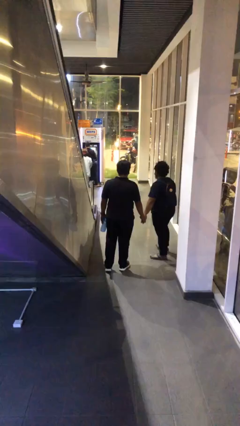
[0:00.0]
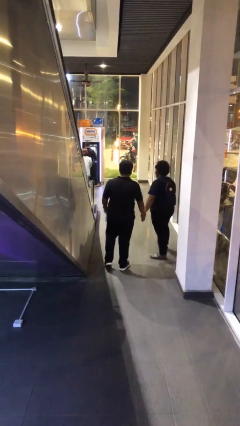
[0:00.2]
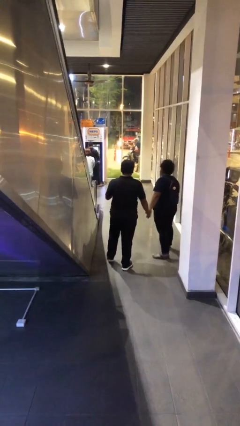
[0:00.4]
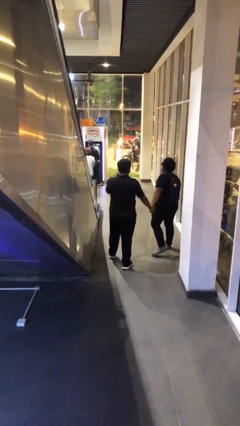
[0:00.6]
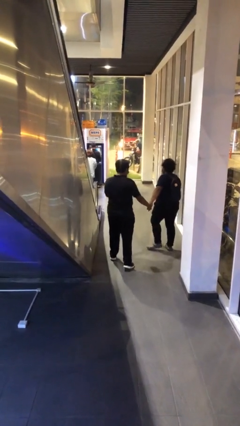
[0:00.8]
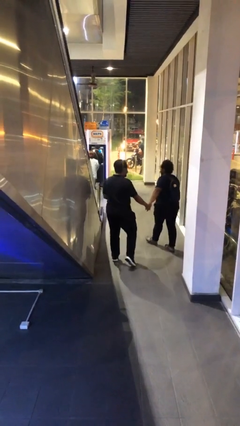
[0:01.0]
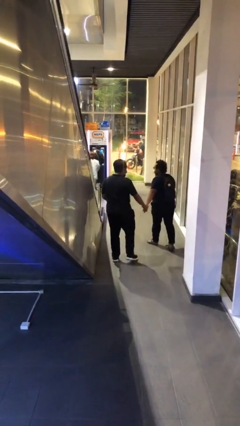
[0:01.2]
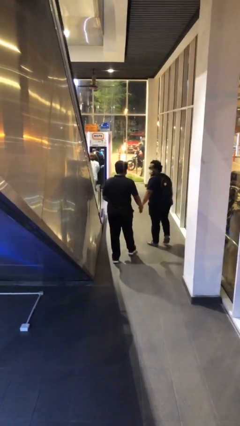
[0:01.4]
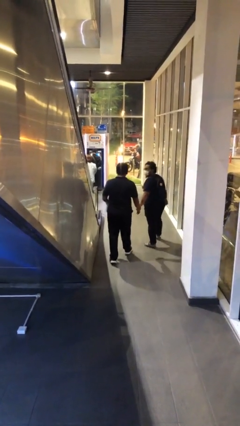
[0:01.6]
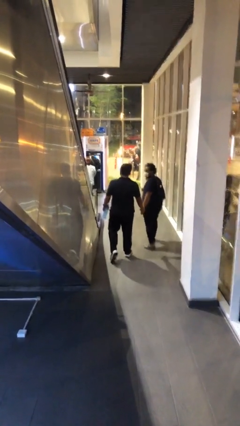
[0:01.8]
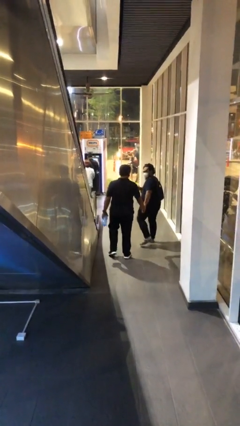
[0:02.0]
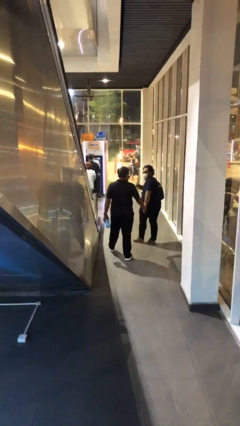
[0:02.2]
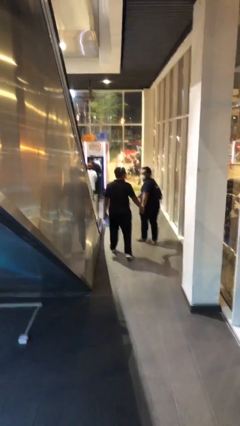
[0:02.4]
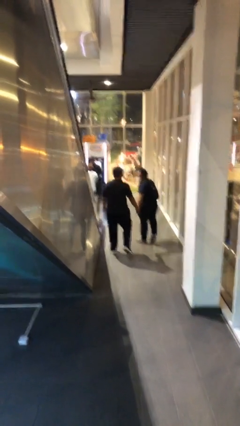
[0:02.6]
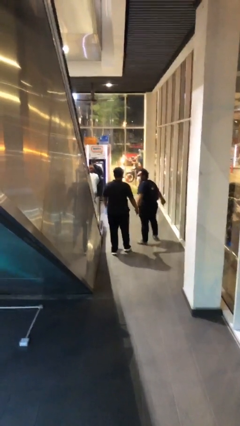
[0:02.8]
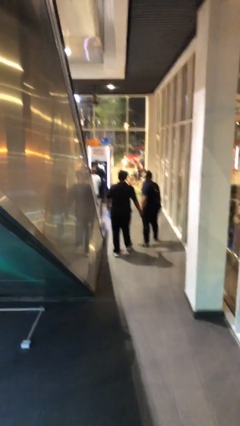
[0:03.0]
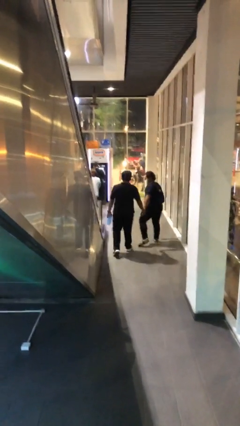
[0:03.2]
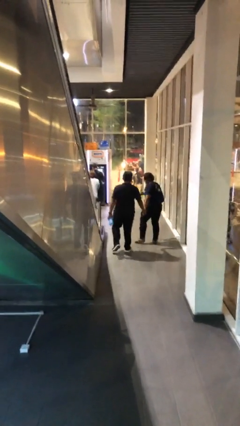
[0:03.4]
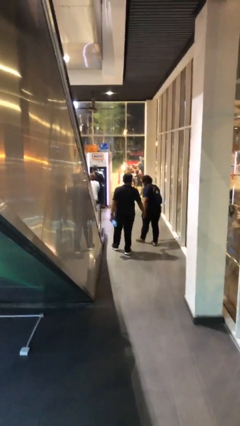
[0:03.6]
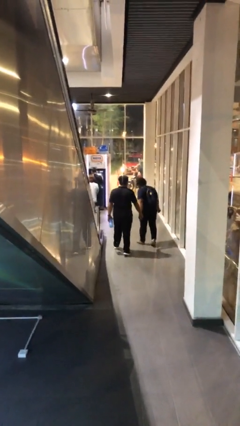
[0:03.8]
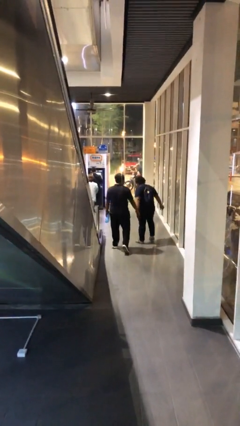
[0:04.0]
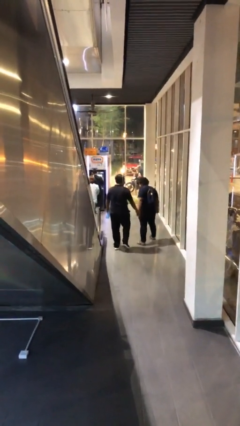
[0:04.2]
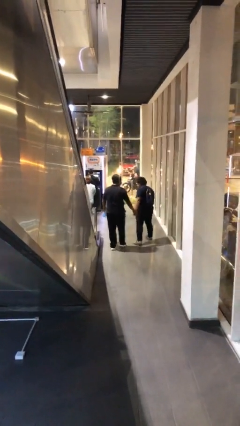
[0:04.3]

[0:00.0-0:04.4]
person holds hand

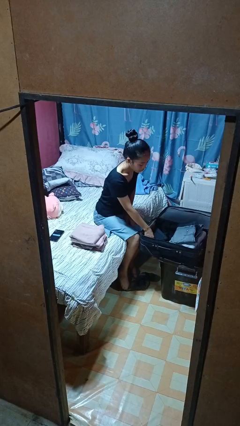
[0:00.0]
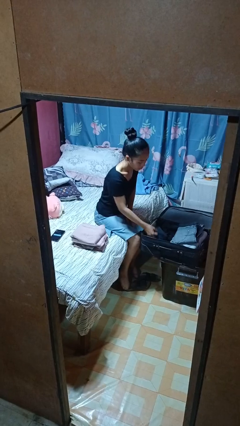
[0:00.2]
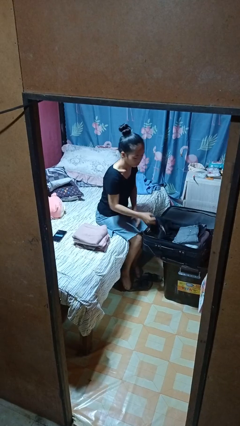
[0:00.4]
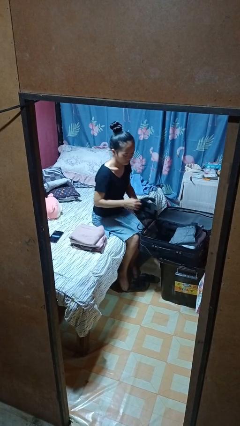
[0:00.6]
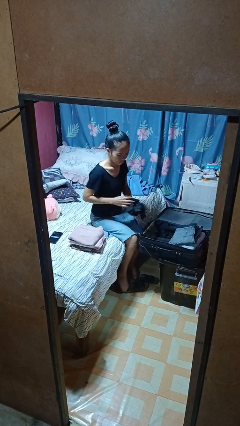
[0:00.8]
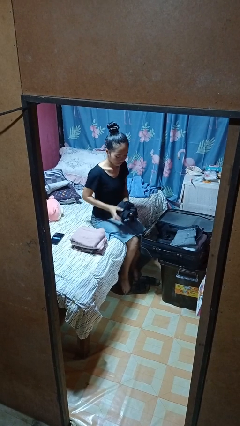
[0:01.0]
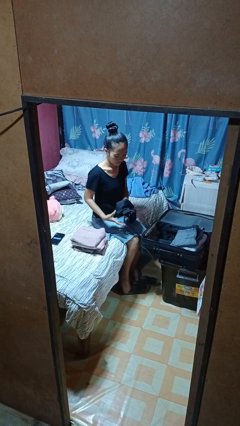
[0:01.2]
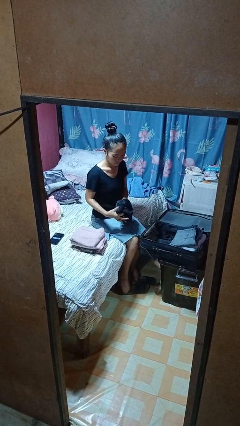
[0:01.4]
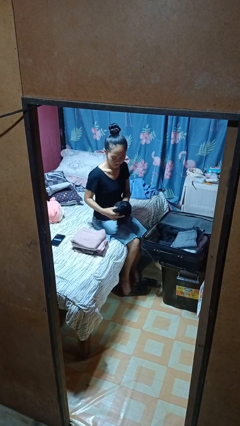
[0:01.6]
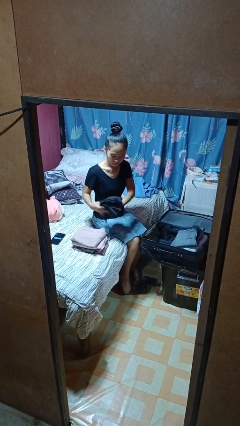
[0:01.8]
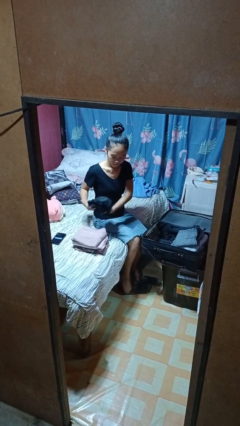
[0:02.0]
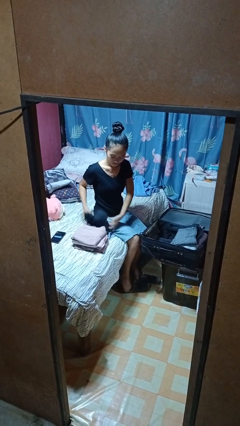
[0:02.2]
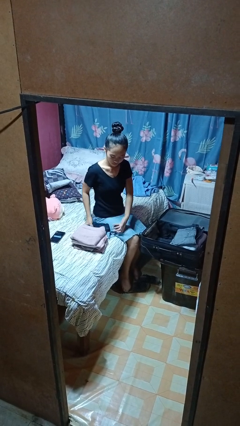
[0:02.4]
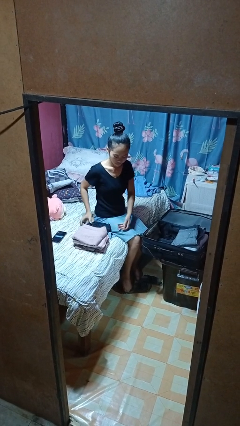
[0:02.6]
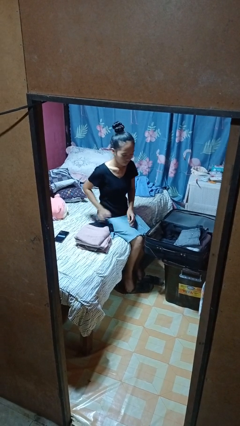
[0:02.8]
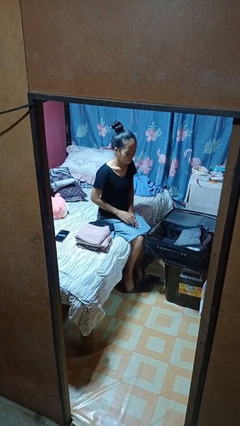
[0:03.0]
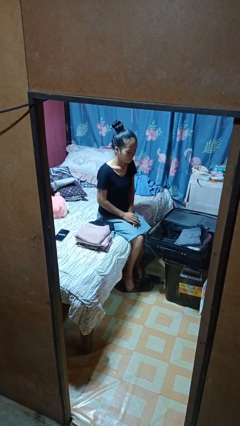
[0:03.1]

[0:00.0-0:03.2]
person unloads clothes from suitcase

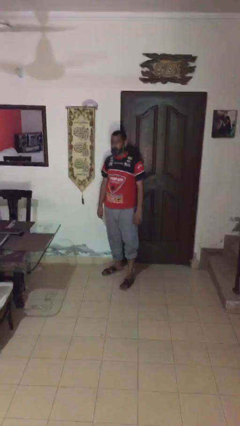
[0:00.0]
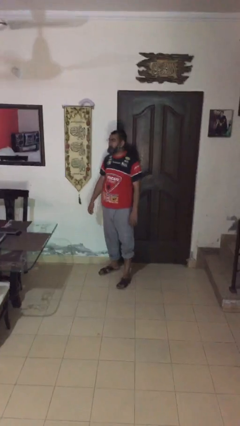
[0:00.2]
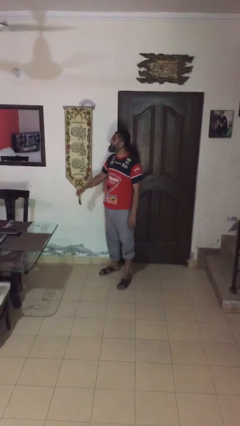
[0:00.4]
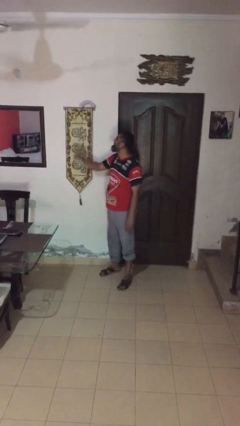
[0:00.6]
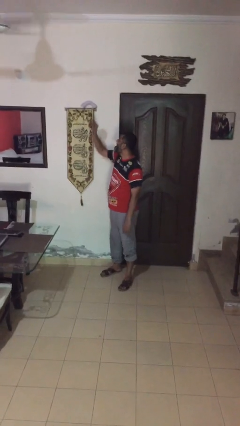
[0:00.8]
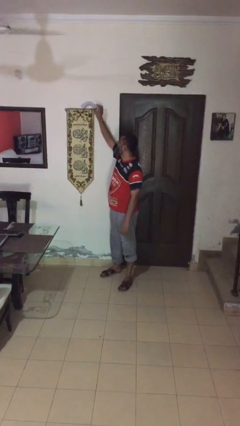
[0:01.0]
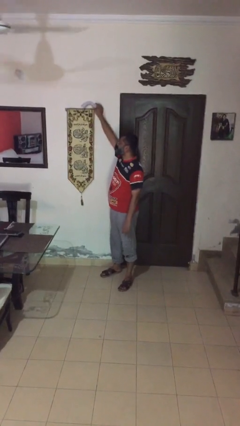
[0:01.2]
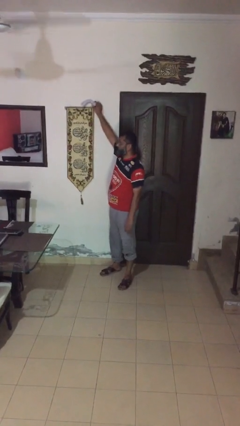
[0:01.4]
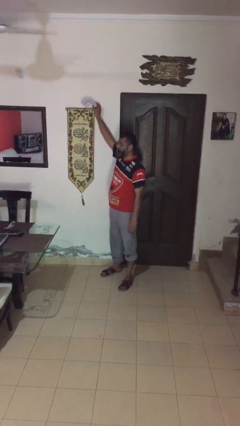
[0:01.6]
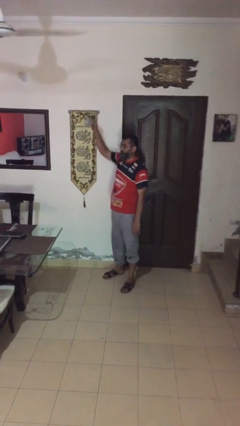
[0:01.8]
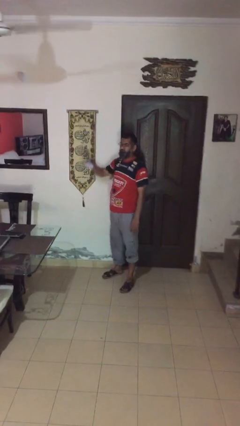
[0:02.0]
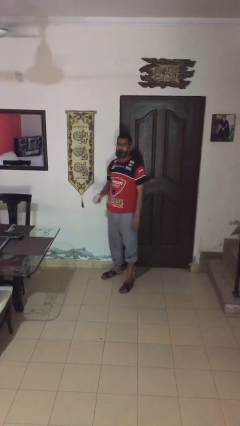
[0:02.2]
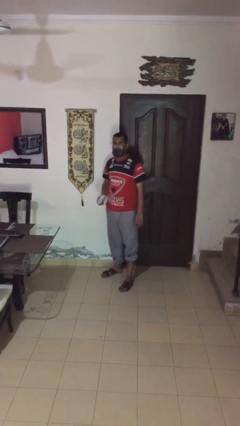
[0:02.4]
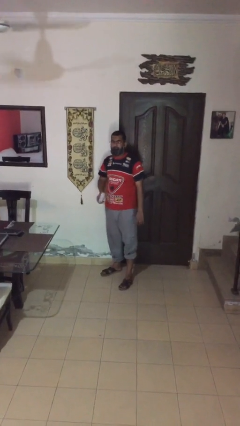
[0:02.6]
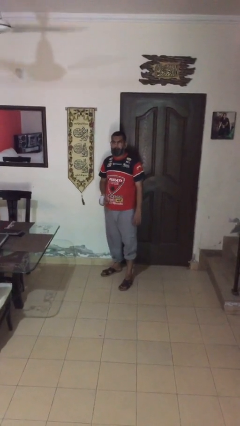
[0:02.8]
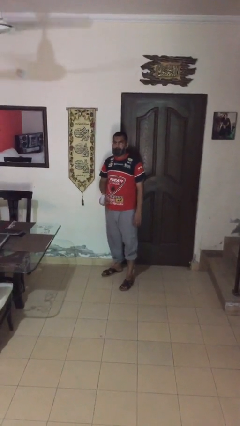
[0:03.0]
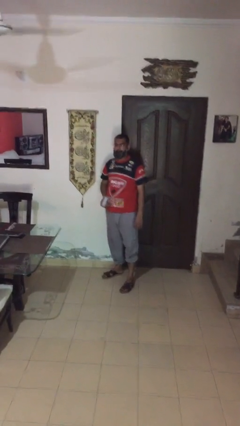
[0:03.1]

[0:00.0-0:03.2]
person picks up object from shelf

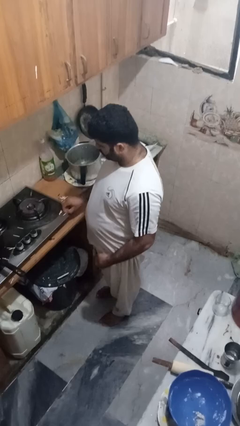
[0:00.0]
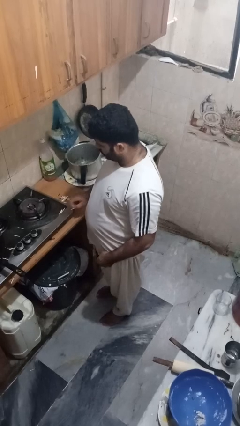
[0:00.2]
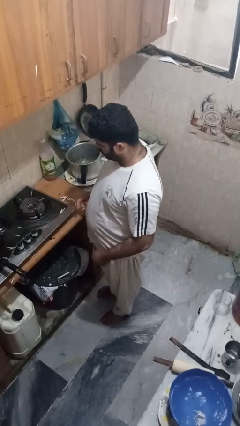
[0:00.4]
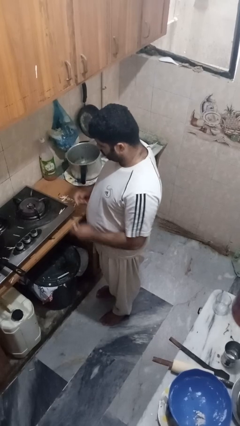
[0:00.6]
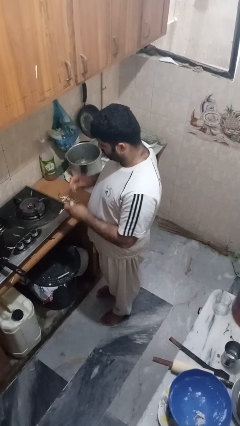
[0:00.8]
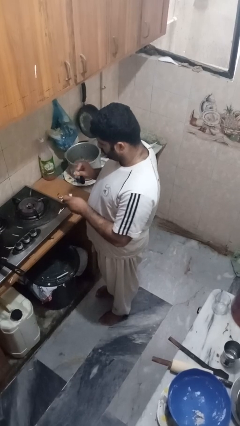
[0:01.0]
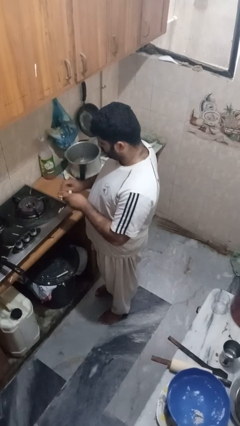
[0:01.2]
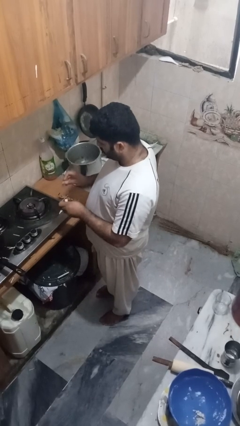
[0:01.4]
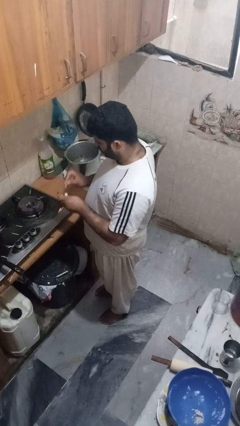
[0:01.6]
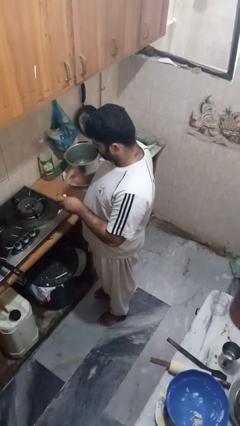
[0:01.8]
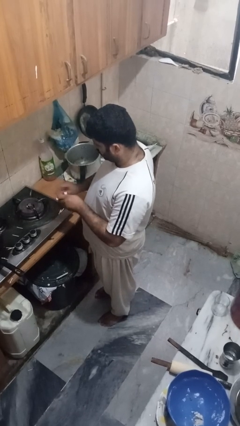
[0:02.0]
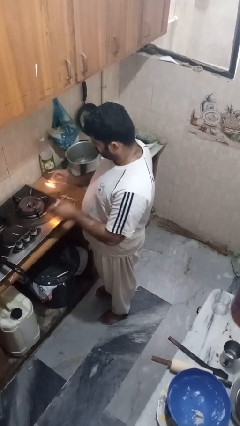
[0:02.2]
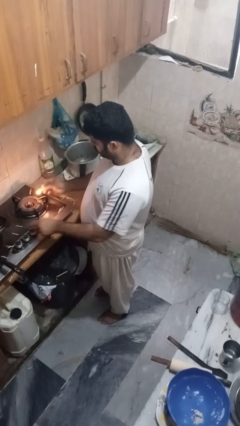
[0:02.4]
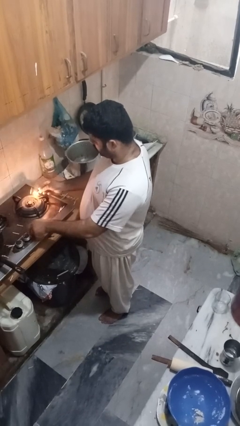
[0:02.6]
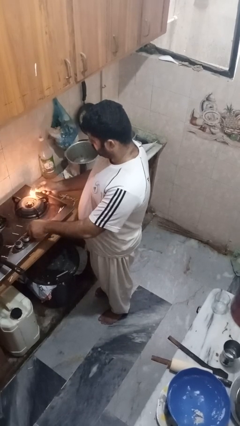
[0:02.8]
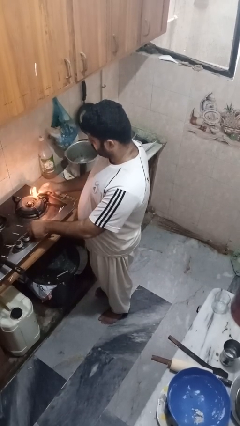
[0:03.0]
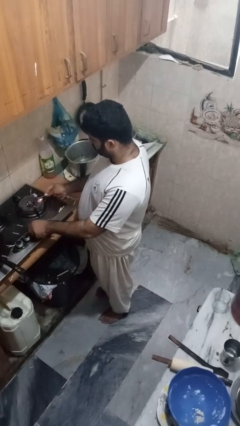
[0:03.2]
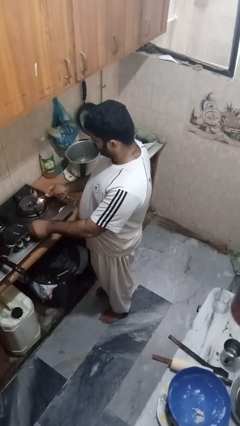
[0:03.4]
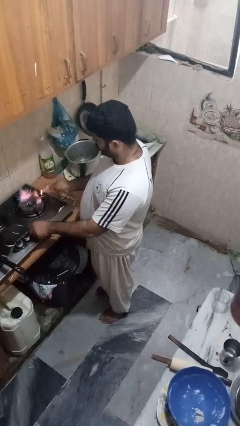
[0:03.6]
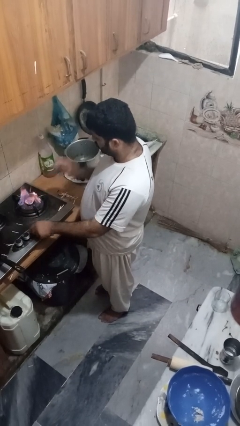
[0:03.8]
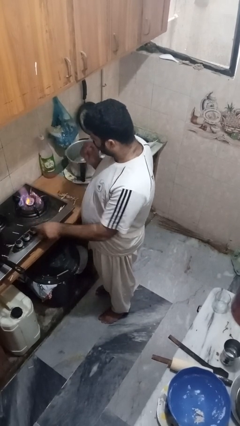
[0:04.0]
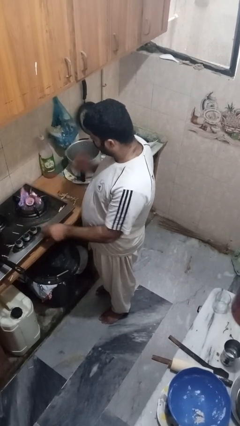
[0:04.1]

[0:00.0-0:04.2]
person turns on stovetop

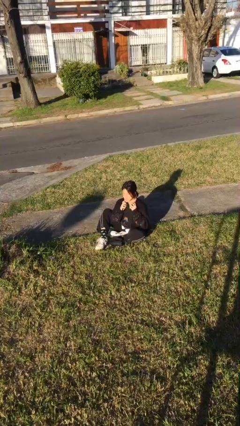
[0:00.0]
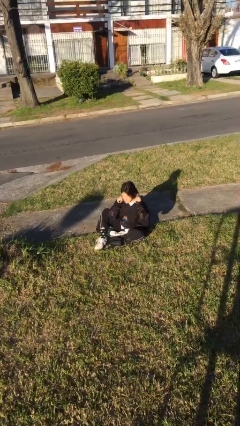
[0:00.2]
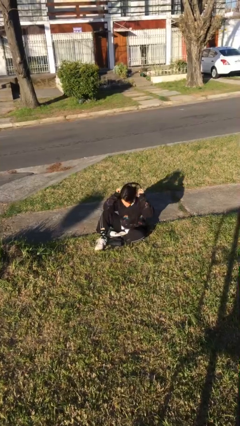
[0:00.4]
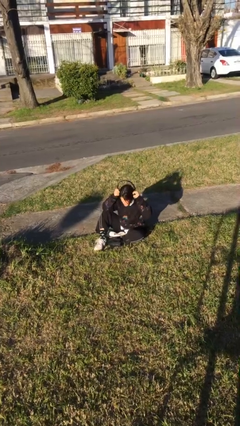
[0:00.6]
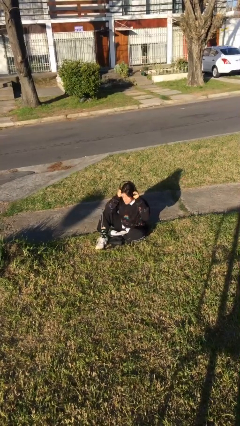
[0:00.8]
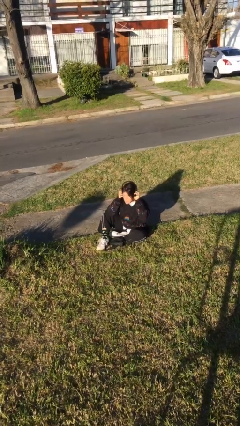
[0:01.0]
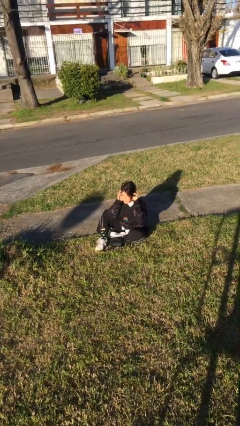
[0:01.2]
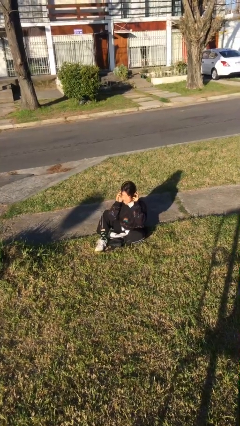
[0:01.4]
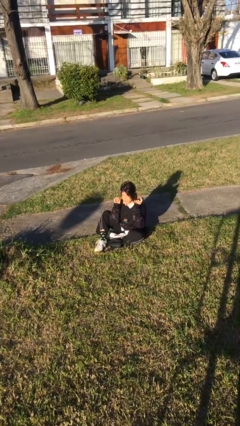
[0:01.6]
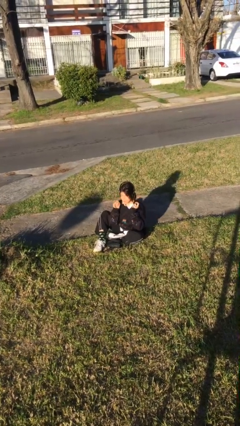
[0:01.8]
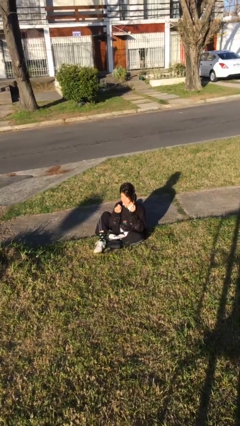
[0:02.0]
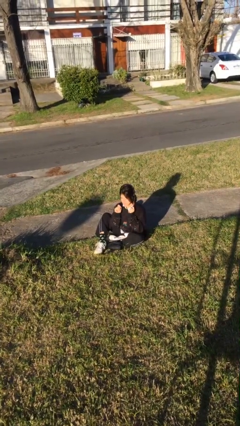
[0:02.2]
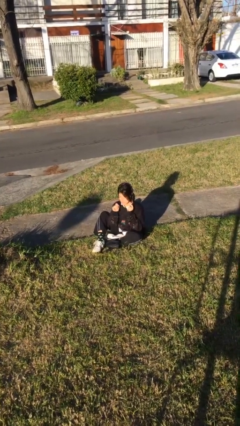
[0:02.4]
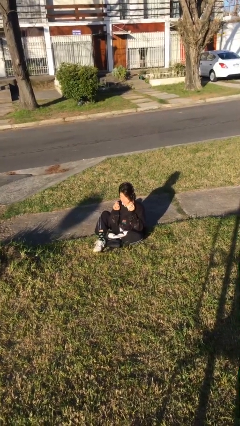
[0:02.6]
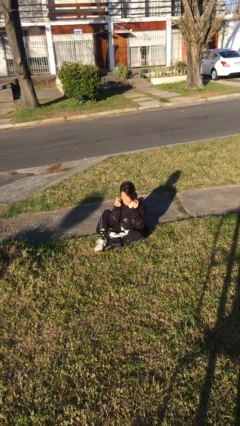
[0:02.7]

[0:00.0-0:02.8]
person puts on headphones
